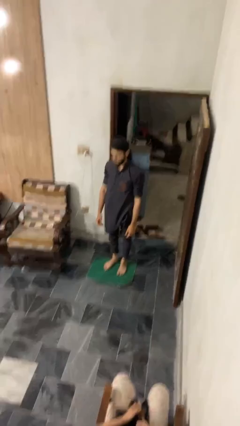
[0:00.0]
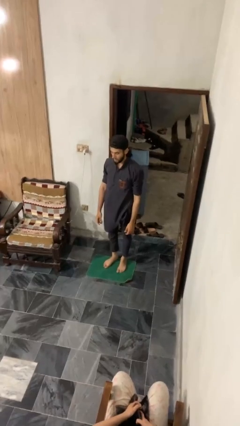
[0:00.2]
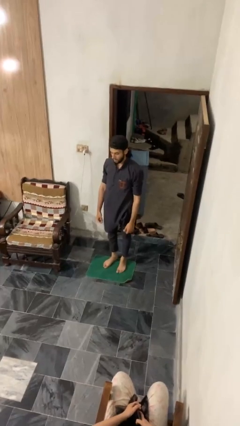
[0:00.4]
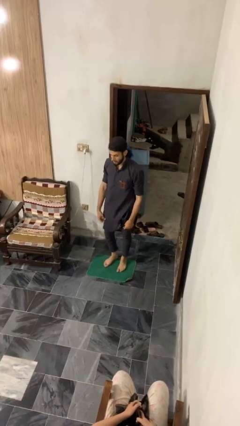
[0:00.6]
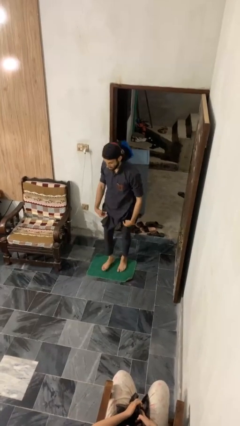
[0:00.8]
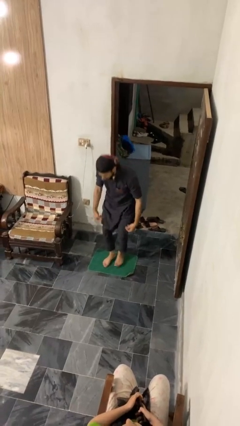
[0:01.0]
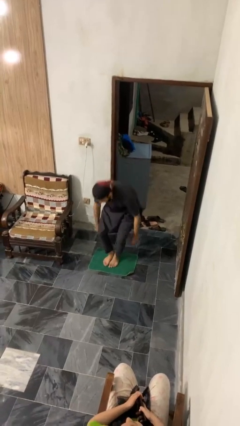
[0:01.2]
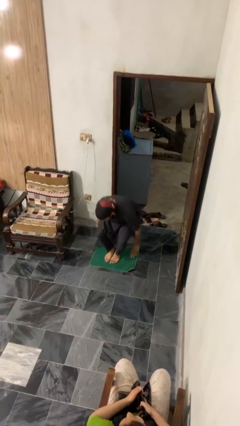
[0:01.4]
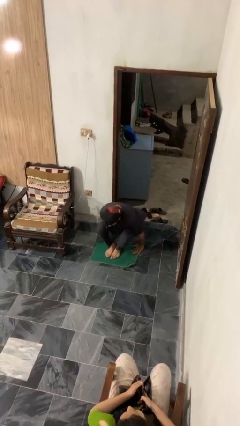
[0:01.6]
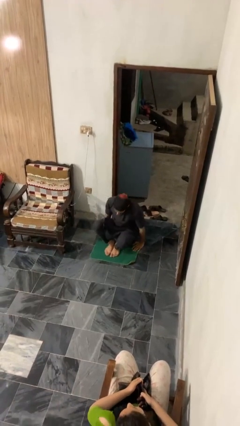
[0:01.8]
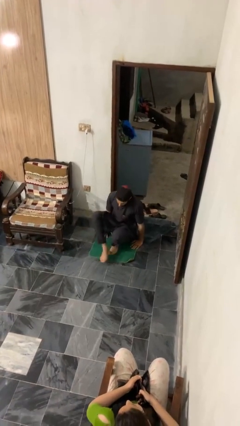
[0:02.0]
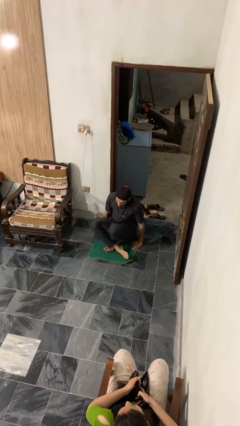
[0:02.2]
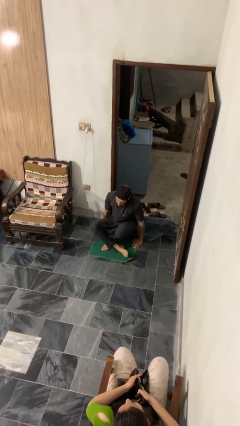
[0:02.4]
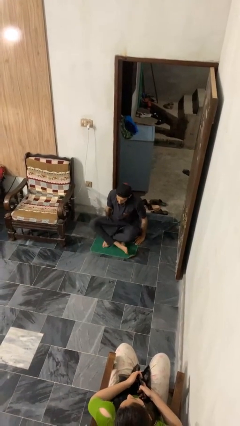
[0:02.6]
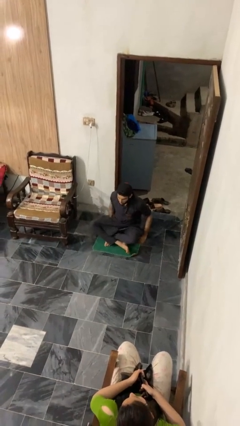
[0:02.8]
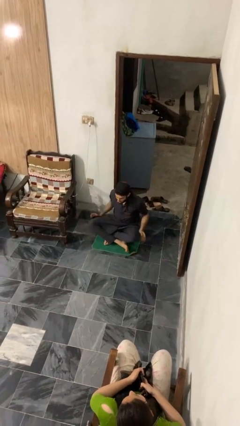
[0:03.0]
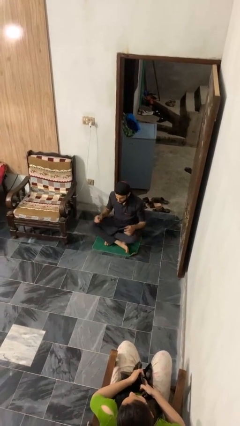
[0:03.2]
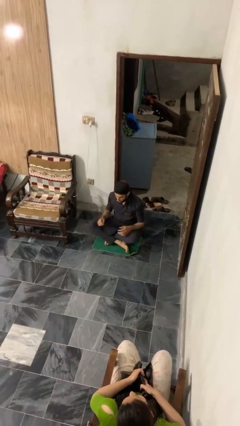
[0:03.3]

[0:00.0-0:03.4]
person sits crisscross

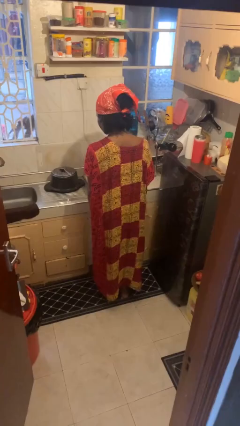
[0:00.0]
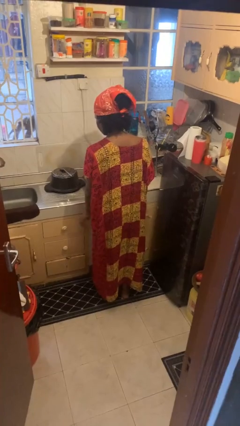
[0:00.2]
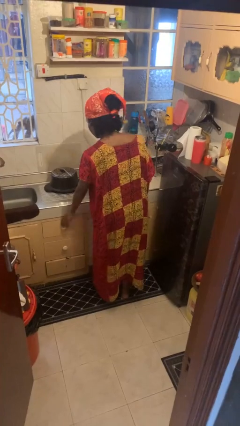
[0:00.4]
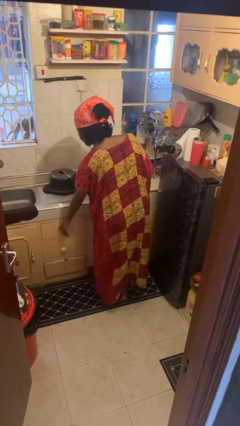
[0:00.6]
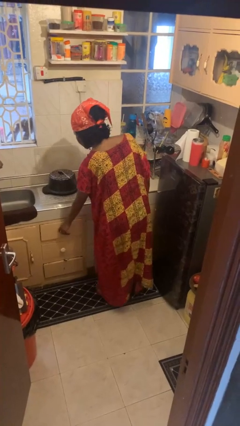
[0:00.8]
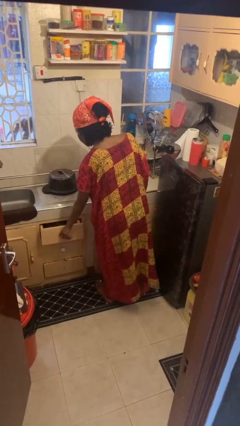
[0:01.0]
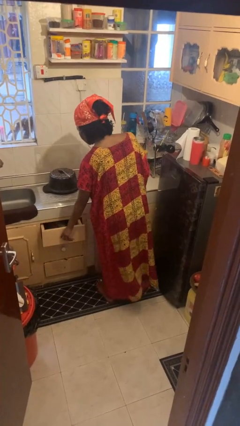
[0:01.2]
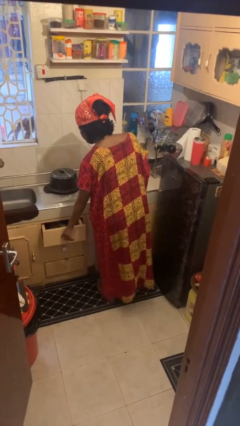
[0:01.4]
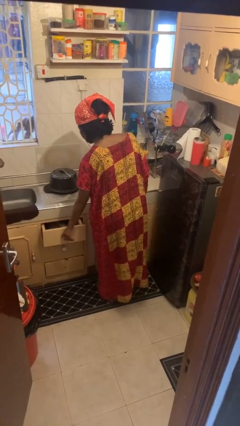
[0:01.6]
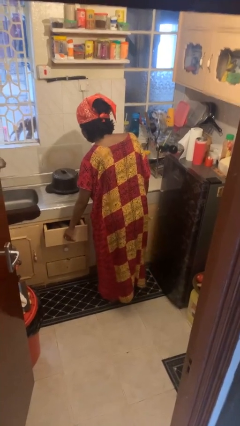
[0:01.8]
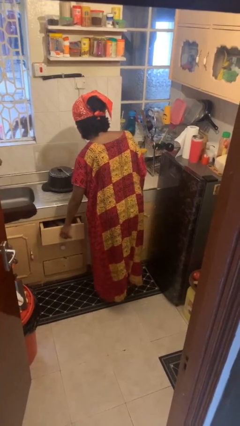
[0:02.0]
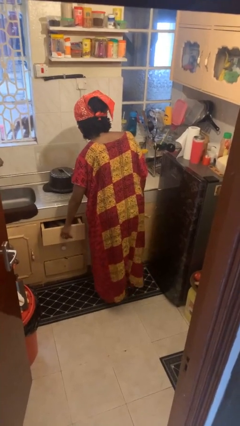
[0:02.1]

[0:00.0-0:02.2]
person opens kitchen drawer

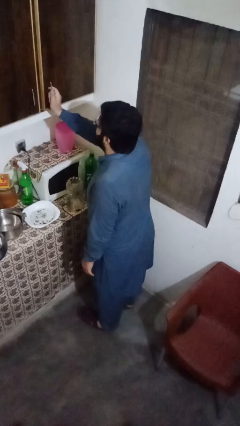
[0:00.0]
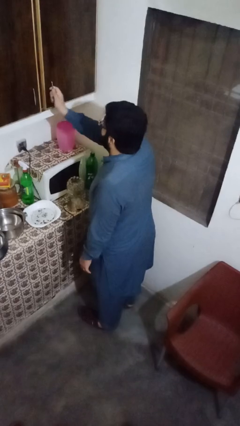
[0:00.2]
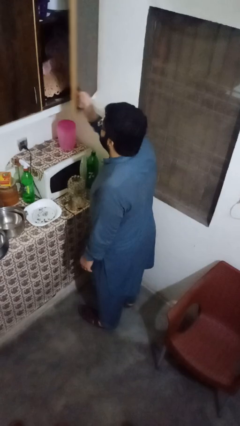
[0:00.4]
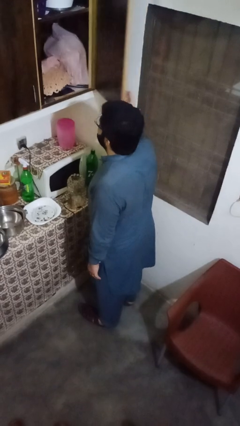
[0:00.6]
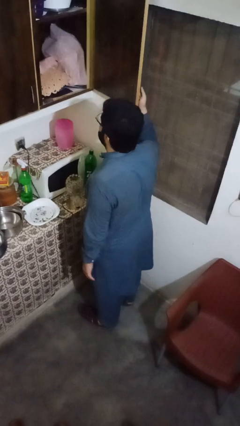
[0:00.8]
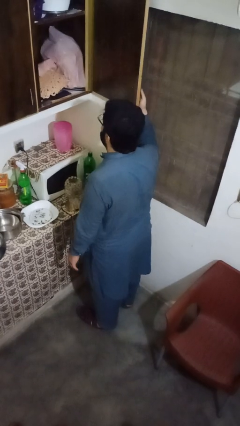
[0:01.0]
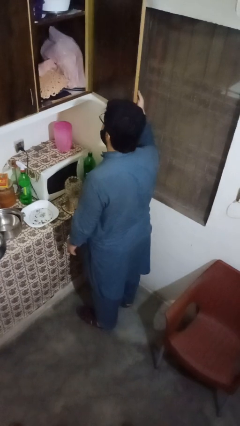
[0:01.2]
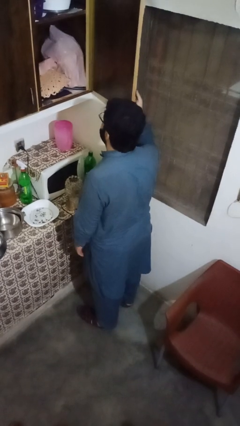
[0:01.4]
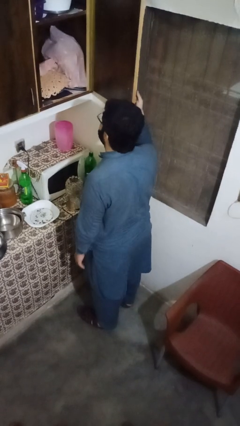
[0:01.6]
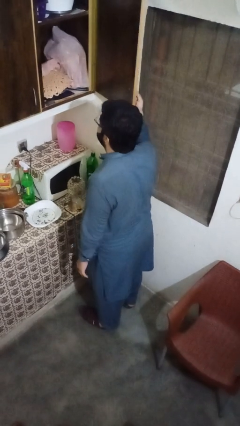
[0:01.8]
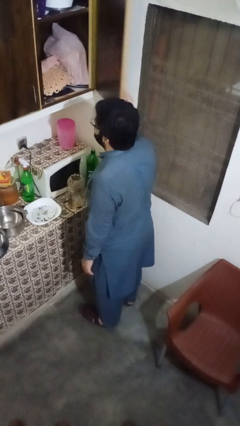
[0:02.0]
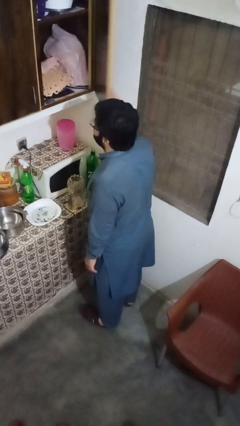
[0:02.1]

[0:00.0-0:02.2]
person closes cabinet

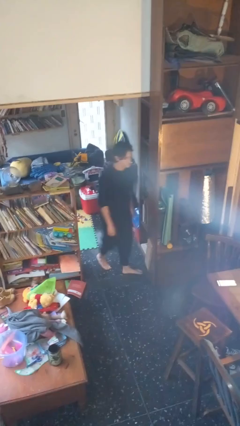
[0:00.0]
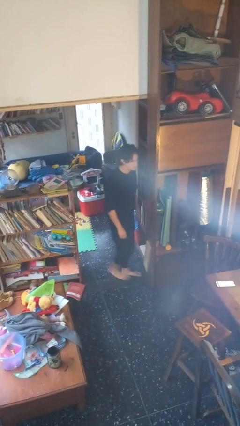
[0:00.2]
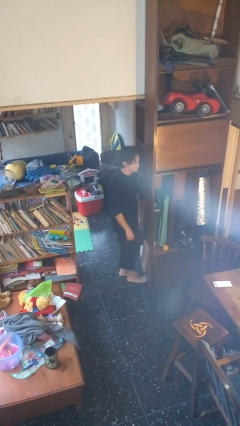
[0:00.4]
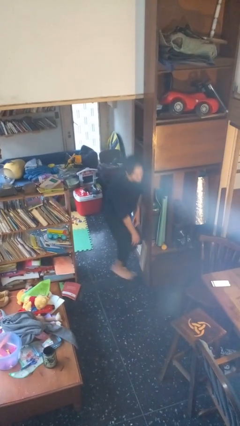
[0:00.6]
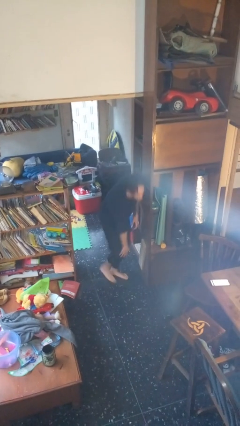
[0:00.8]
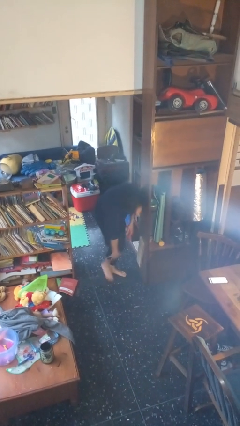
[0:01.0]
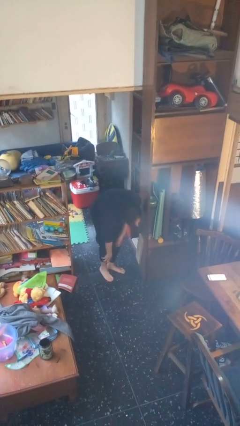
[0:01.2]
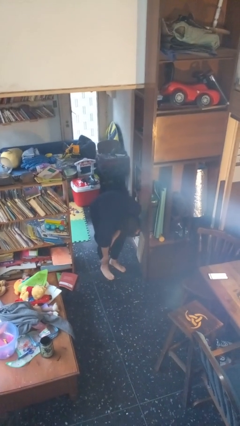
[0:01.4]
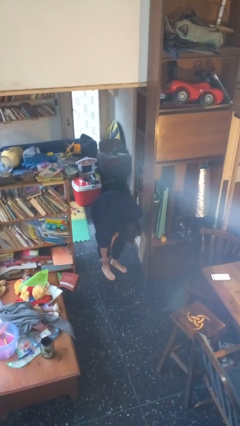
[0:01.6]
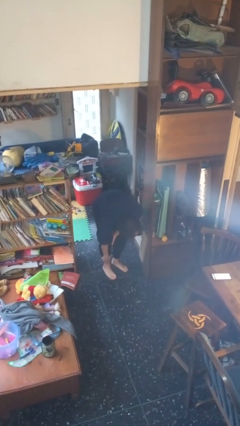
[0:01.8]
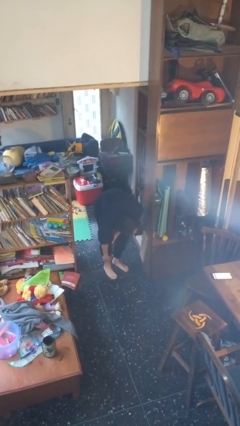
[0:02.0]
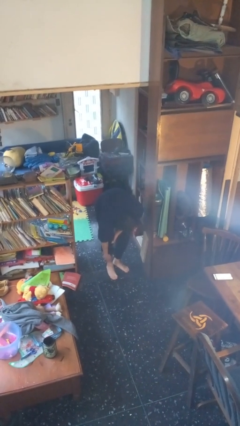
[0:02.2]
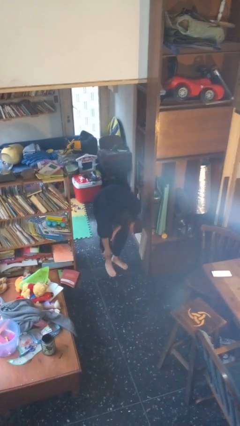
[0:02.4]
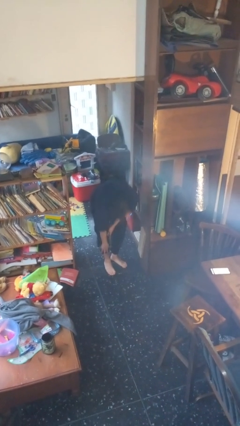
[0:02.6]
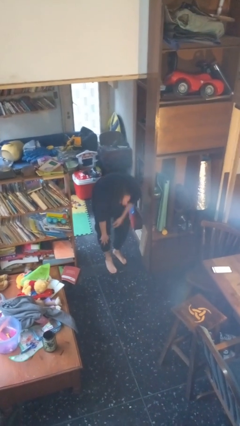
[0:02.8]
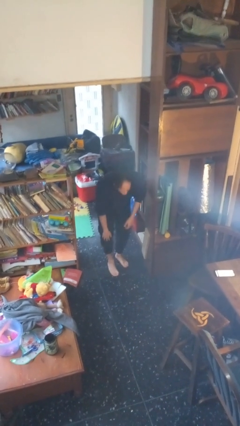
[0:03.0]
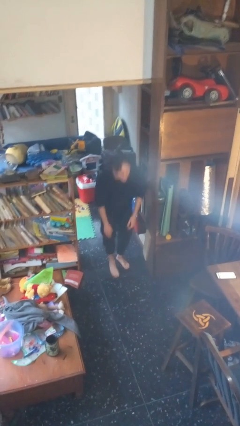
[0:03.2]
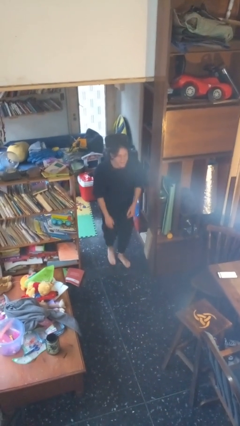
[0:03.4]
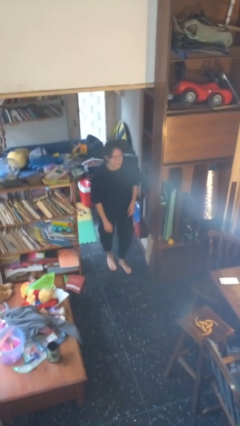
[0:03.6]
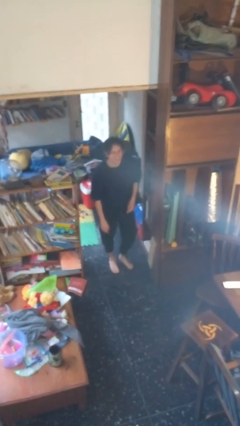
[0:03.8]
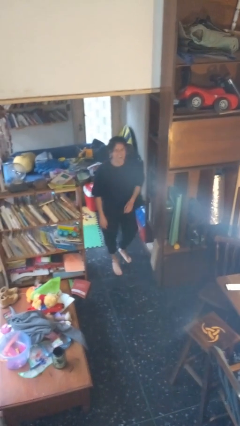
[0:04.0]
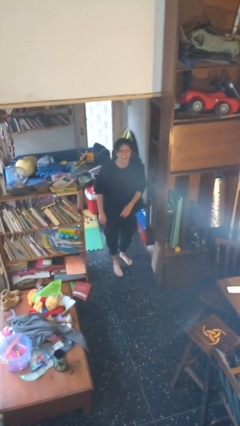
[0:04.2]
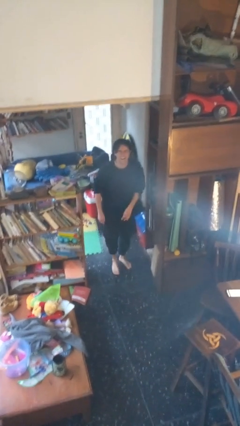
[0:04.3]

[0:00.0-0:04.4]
person stubs toe

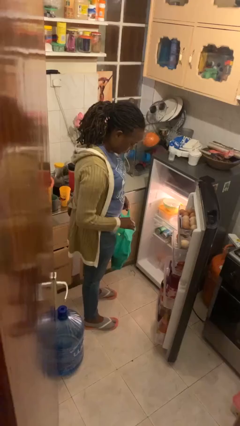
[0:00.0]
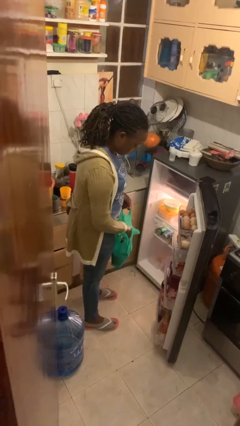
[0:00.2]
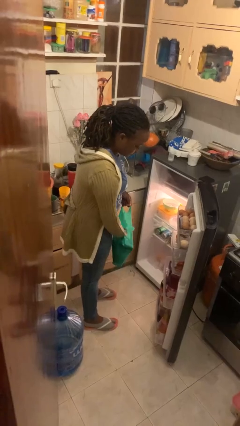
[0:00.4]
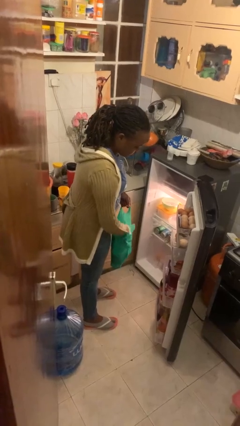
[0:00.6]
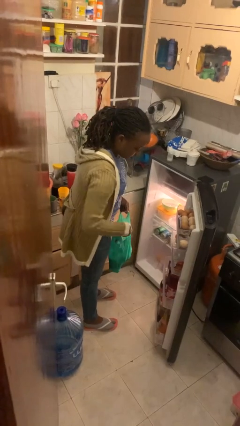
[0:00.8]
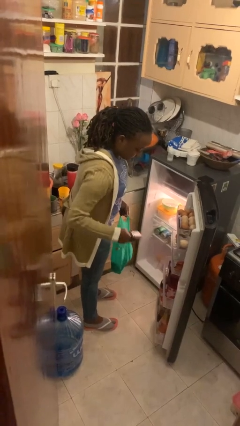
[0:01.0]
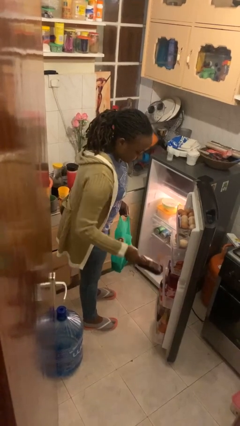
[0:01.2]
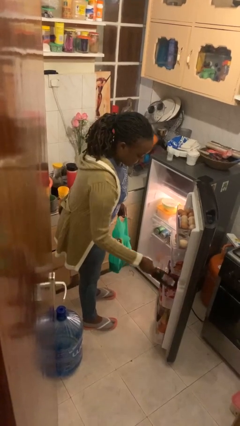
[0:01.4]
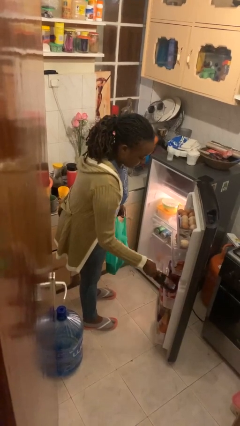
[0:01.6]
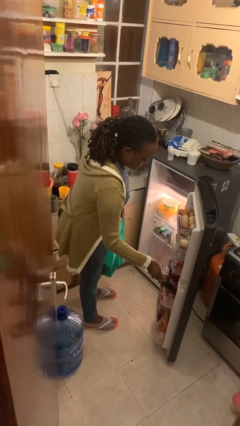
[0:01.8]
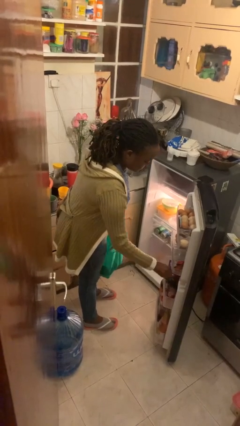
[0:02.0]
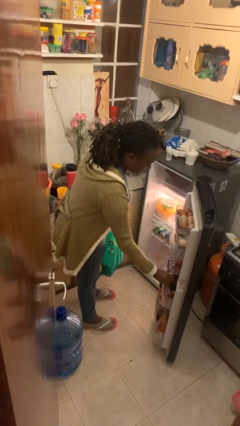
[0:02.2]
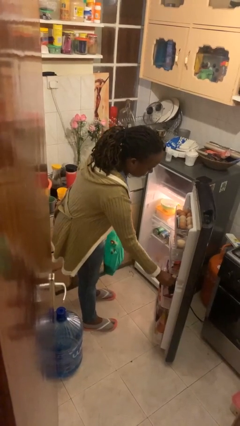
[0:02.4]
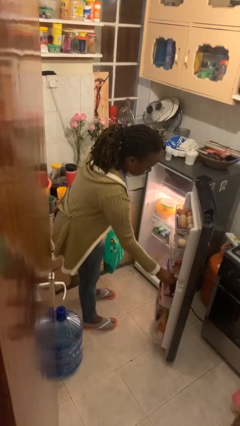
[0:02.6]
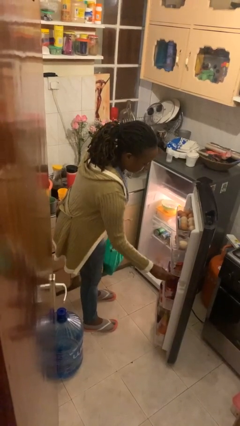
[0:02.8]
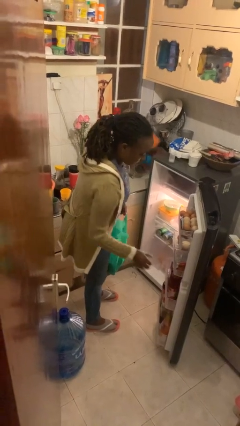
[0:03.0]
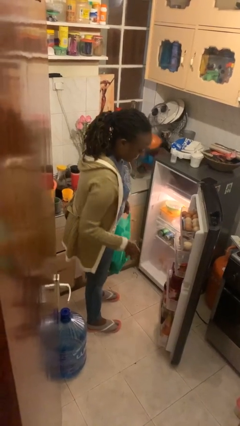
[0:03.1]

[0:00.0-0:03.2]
person loads groceries into refrigerator

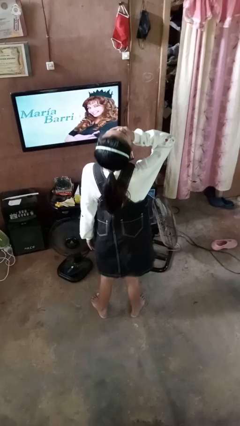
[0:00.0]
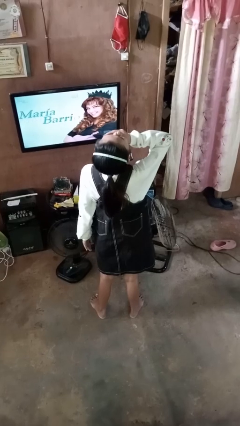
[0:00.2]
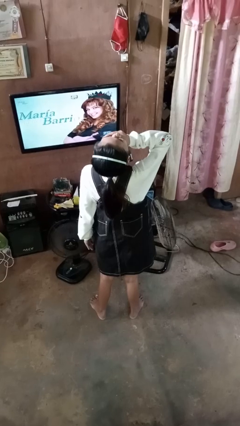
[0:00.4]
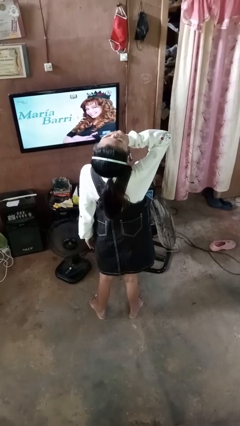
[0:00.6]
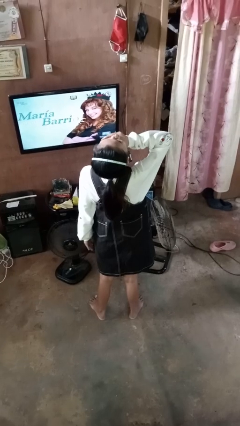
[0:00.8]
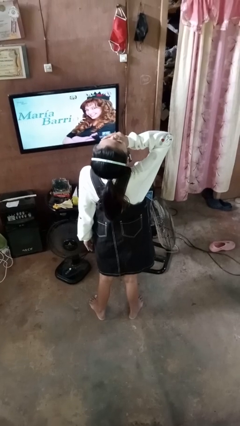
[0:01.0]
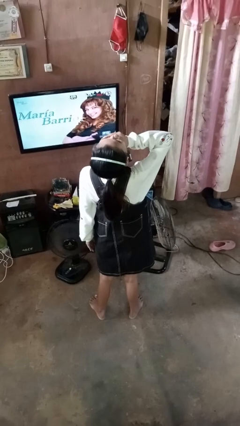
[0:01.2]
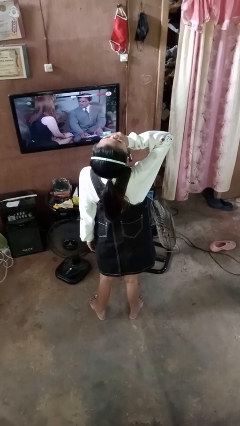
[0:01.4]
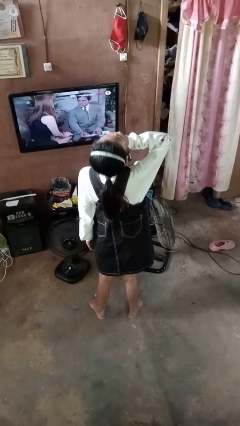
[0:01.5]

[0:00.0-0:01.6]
person yawns

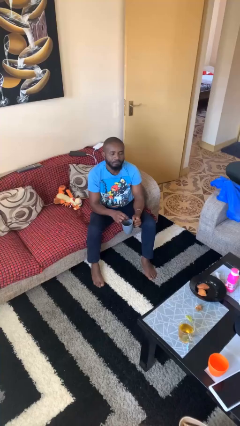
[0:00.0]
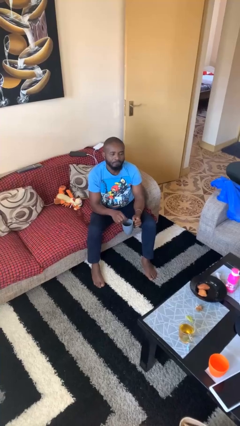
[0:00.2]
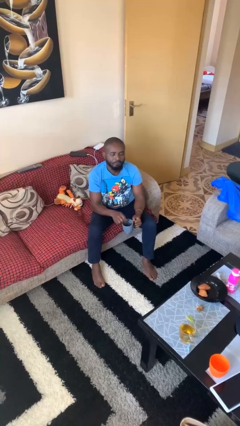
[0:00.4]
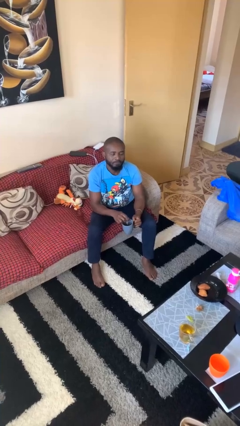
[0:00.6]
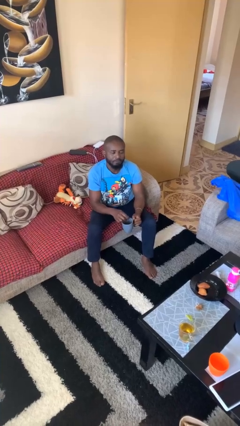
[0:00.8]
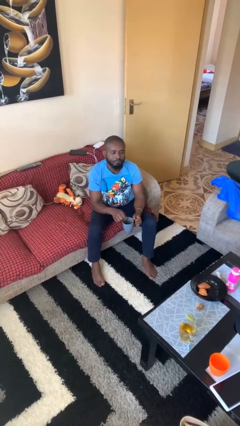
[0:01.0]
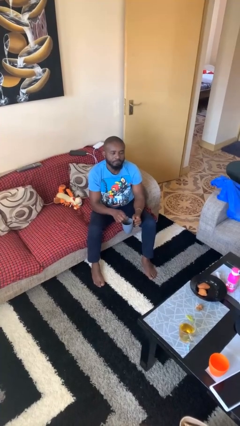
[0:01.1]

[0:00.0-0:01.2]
person stirs mug
